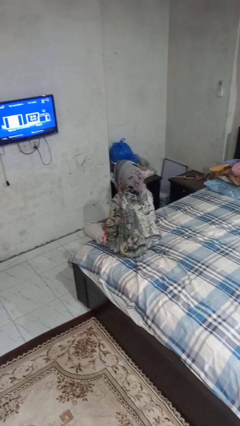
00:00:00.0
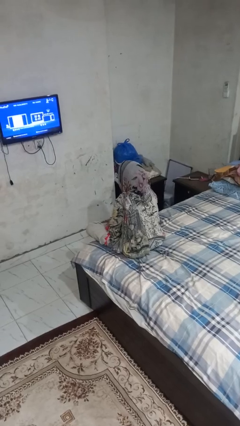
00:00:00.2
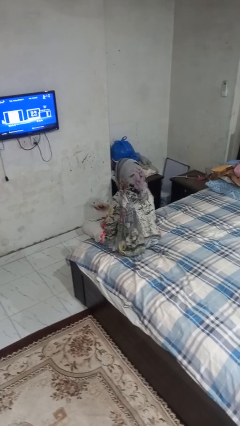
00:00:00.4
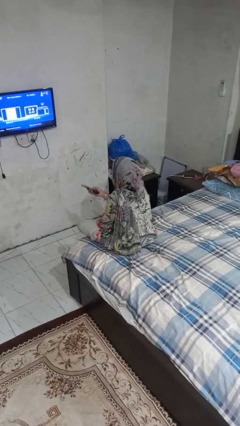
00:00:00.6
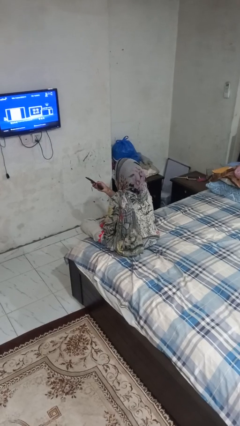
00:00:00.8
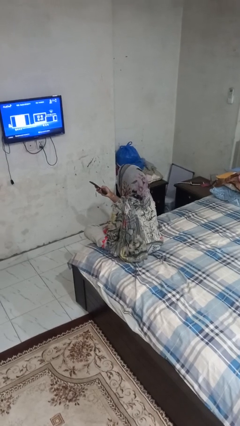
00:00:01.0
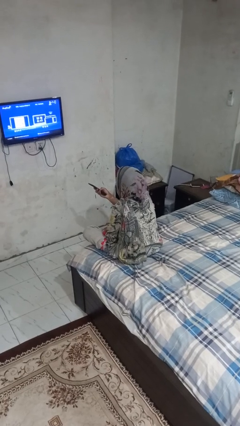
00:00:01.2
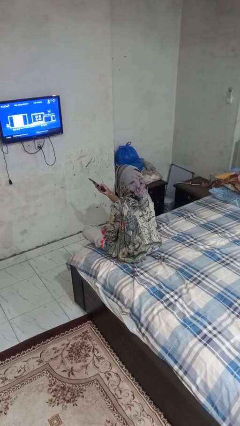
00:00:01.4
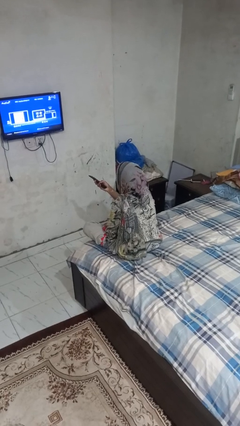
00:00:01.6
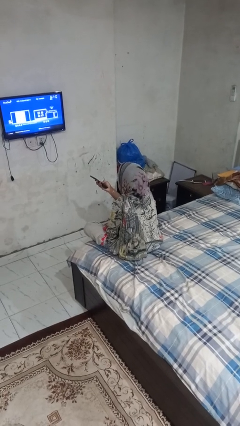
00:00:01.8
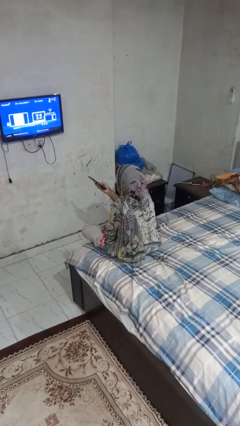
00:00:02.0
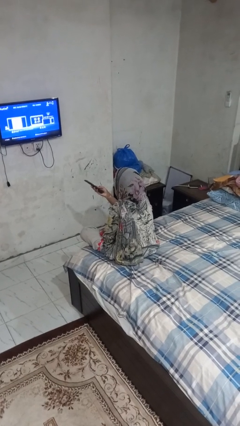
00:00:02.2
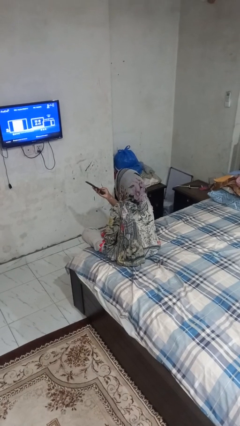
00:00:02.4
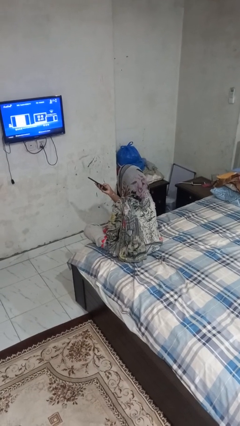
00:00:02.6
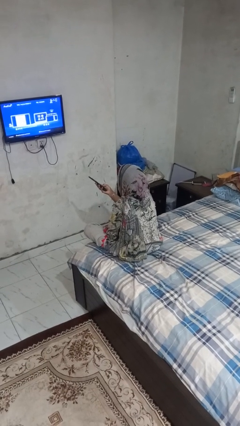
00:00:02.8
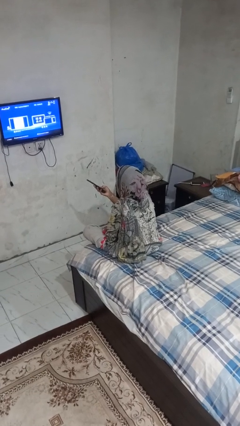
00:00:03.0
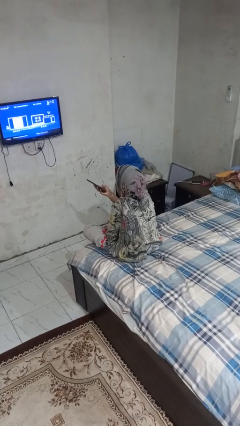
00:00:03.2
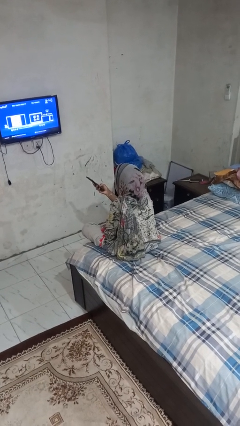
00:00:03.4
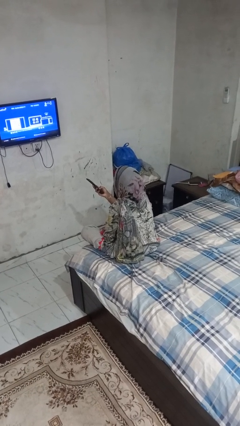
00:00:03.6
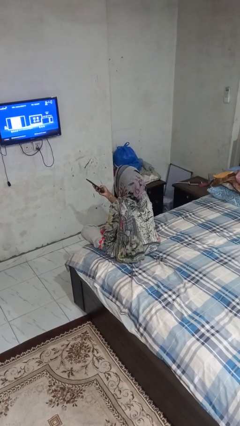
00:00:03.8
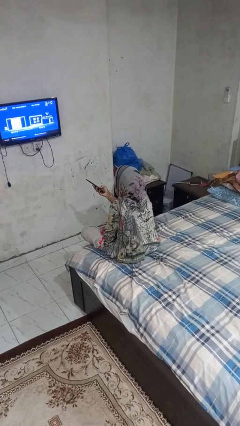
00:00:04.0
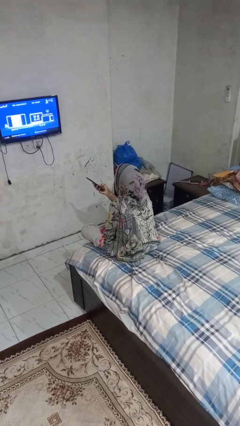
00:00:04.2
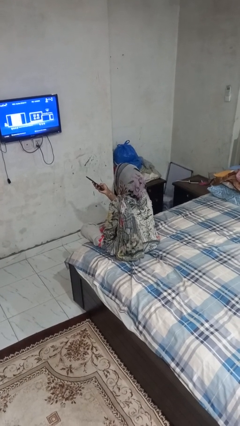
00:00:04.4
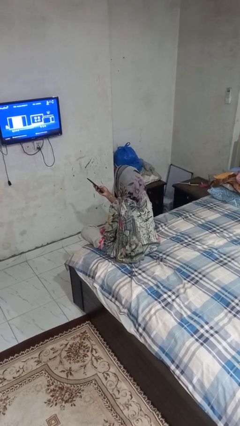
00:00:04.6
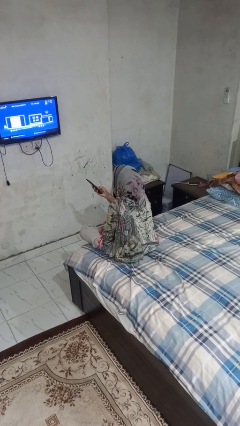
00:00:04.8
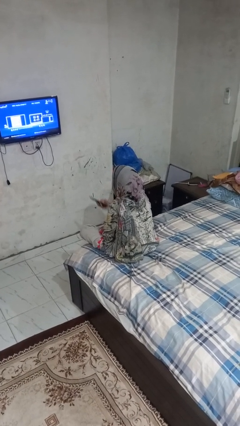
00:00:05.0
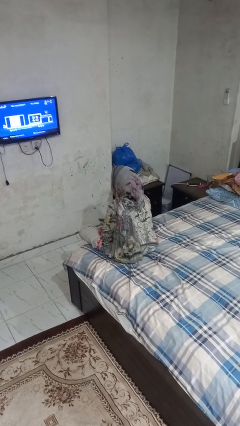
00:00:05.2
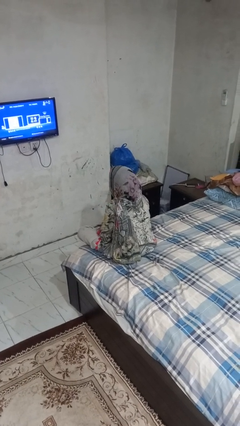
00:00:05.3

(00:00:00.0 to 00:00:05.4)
person uses television remote

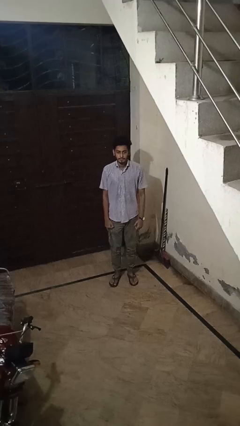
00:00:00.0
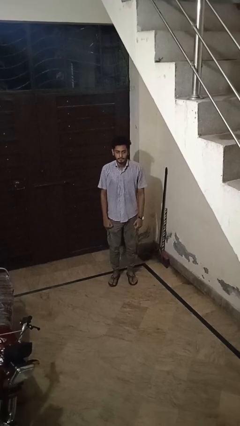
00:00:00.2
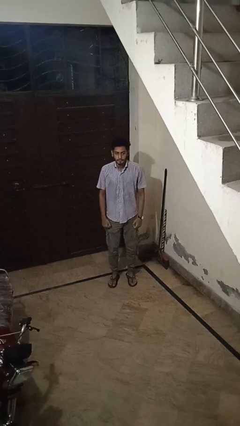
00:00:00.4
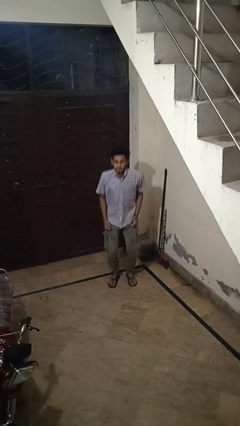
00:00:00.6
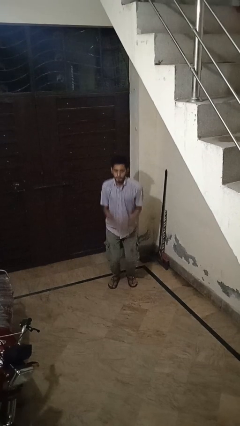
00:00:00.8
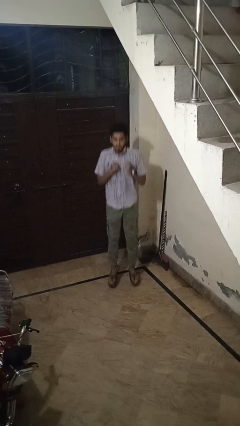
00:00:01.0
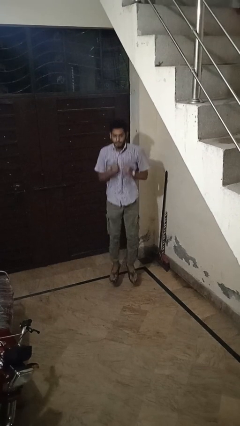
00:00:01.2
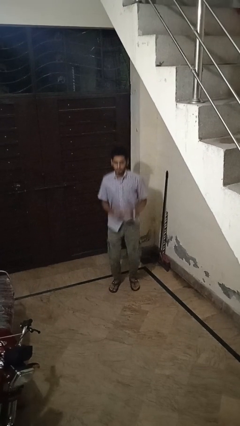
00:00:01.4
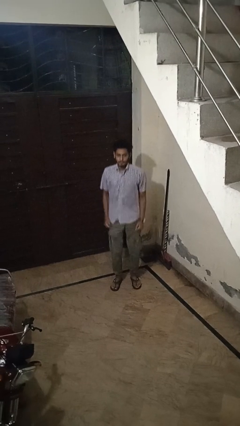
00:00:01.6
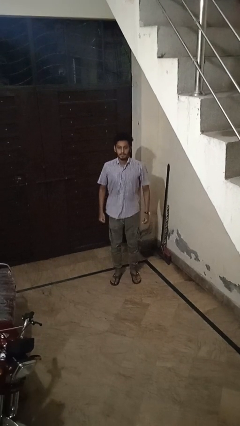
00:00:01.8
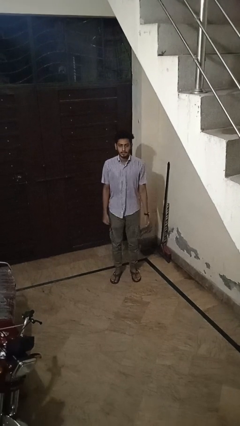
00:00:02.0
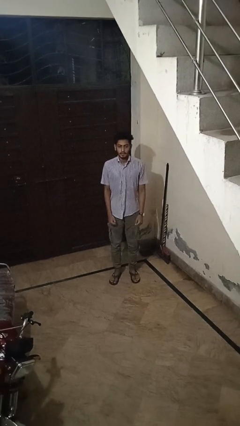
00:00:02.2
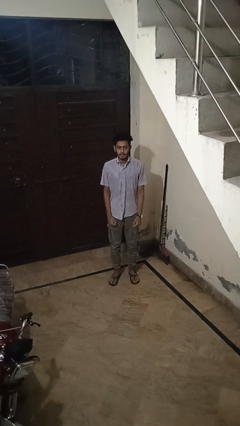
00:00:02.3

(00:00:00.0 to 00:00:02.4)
person jumps

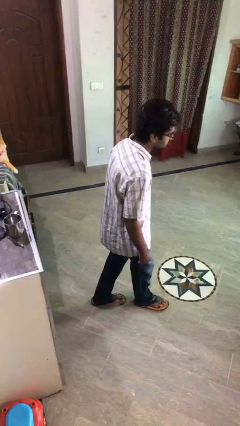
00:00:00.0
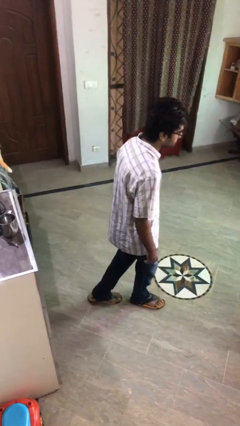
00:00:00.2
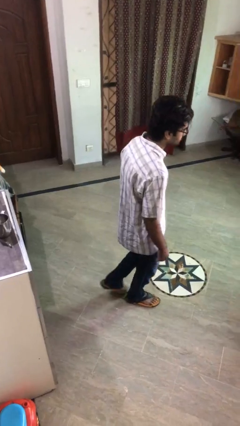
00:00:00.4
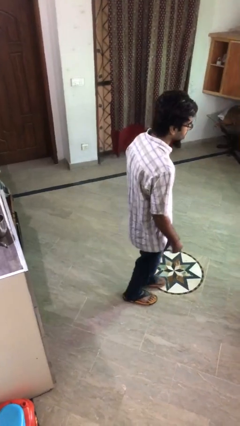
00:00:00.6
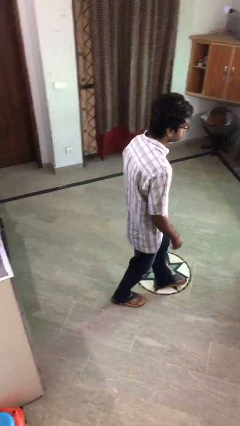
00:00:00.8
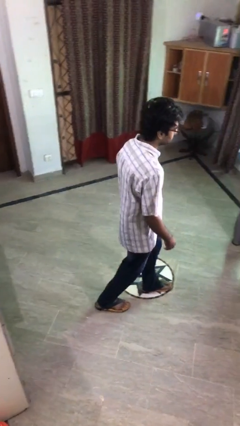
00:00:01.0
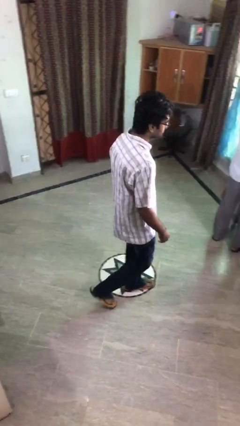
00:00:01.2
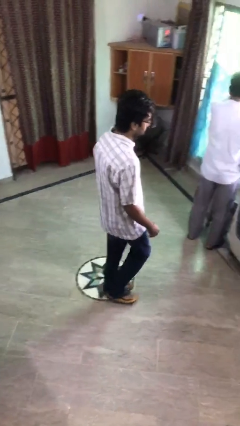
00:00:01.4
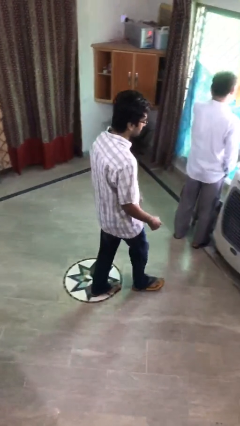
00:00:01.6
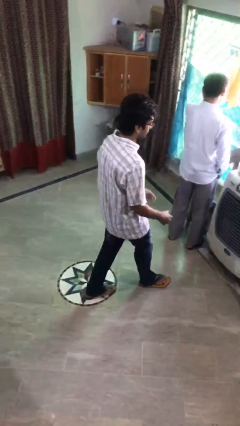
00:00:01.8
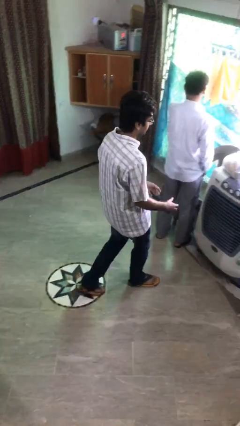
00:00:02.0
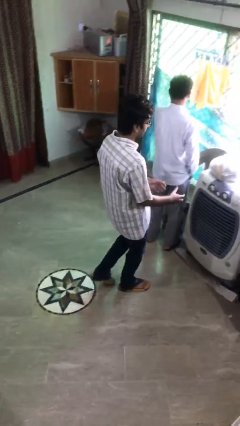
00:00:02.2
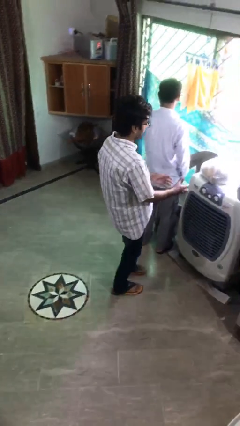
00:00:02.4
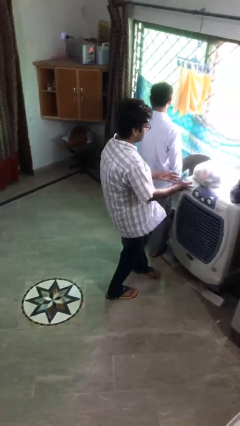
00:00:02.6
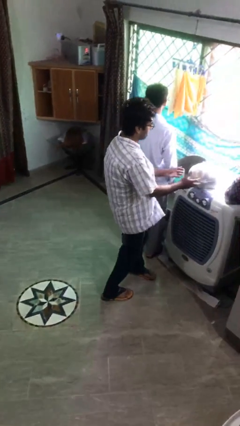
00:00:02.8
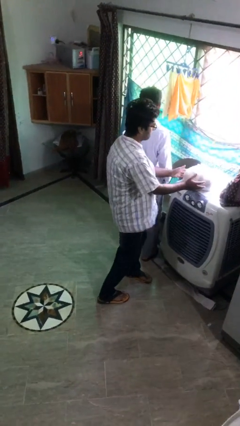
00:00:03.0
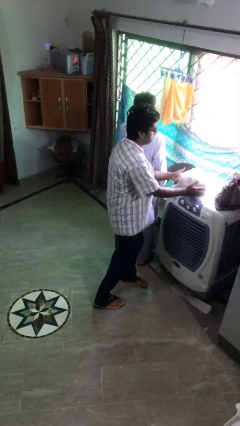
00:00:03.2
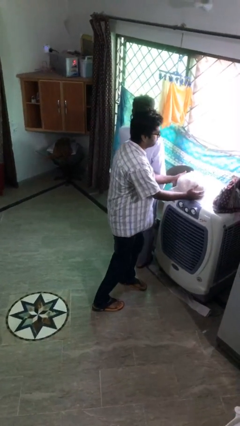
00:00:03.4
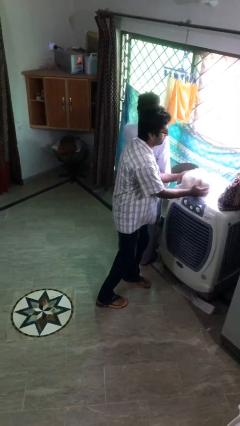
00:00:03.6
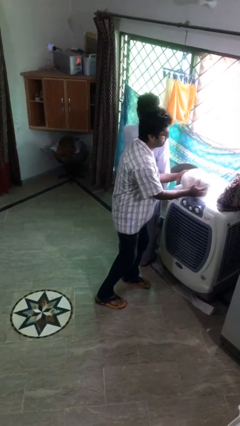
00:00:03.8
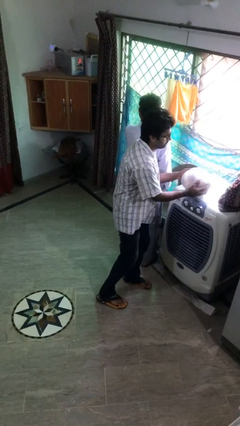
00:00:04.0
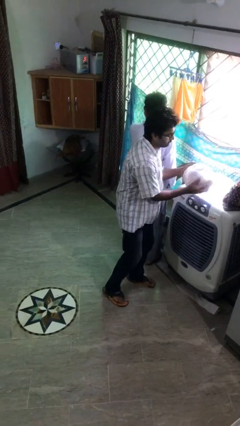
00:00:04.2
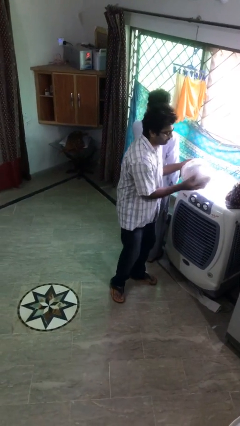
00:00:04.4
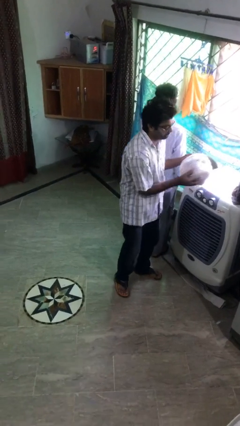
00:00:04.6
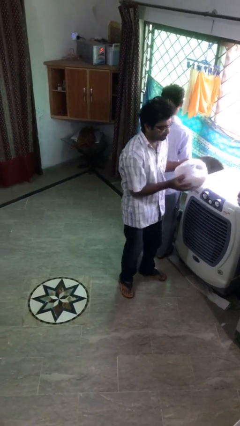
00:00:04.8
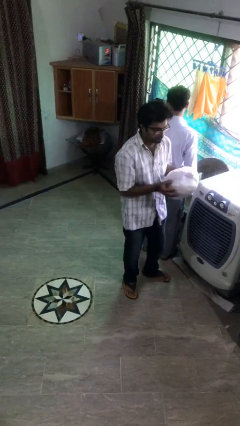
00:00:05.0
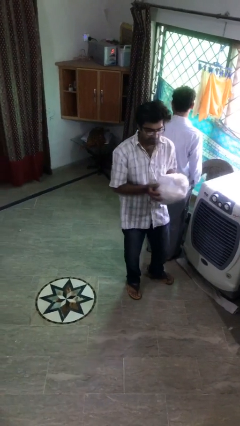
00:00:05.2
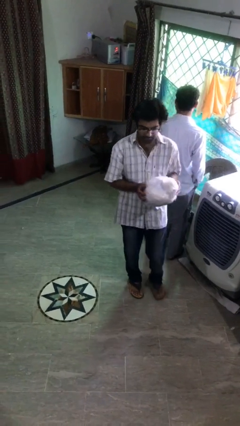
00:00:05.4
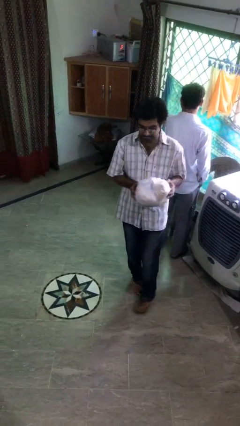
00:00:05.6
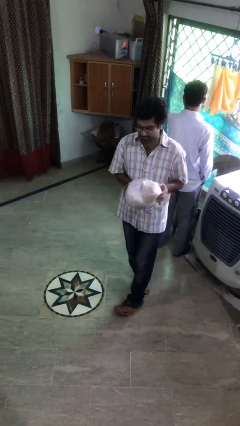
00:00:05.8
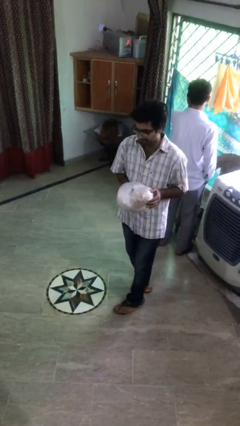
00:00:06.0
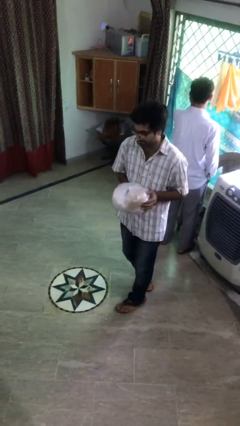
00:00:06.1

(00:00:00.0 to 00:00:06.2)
person steals object from person

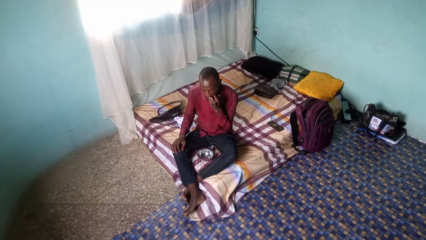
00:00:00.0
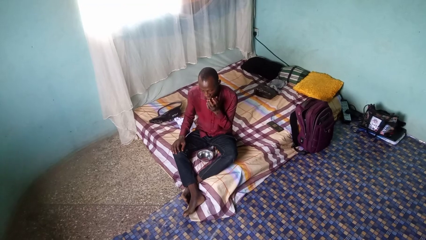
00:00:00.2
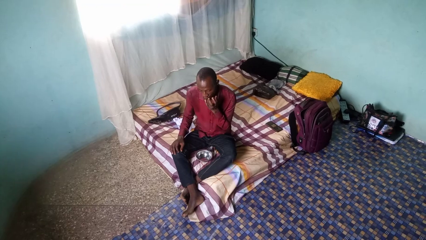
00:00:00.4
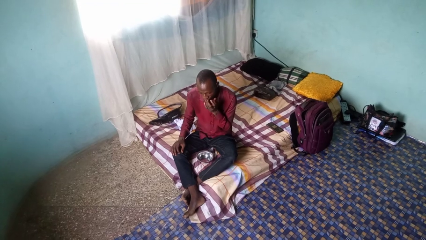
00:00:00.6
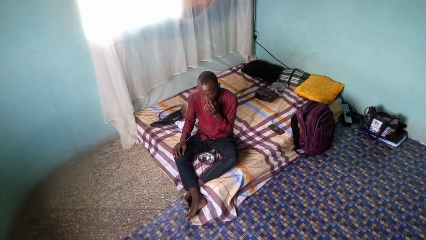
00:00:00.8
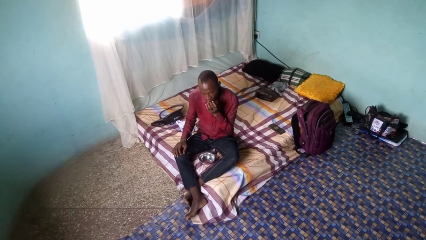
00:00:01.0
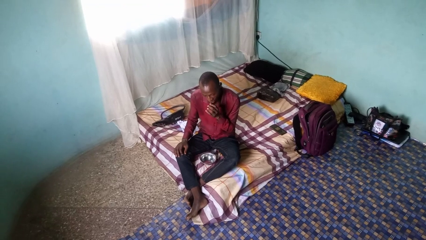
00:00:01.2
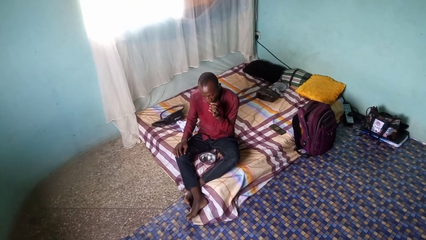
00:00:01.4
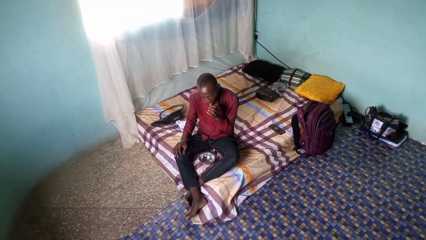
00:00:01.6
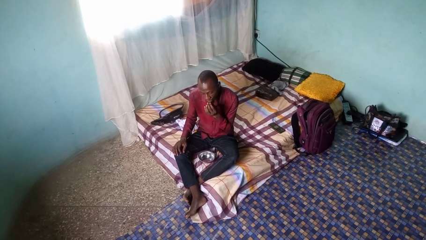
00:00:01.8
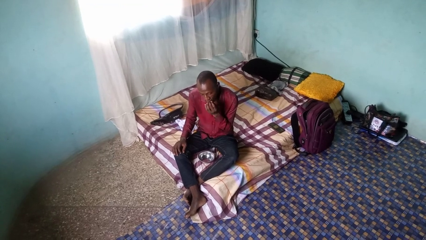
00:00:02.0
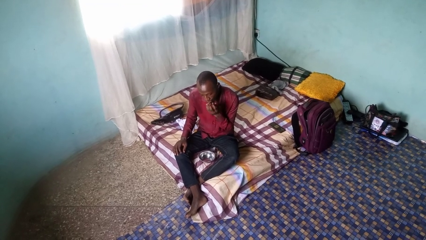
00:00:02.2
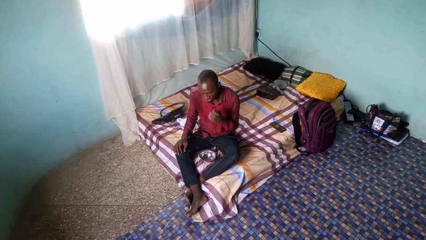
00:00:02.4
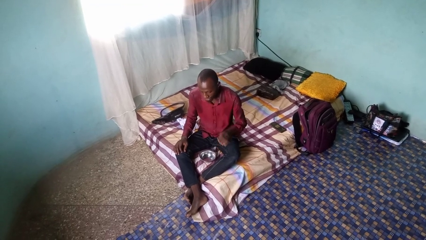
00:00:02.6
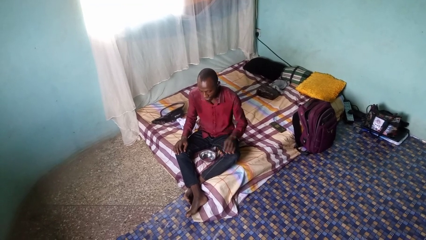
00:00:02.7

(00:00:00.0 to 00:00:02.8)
person licks fingers

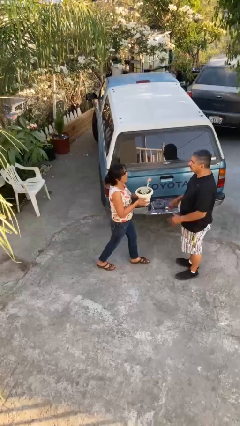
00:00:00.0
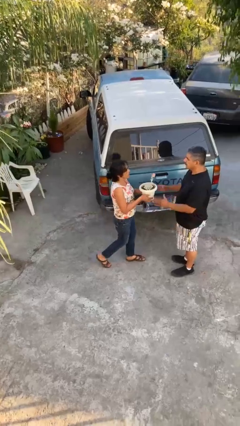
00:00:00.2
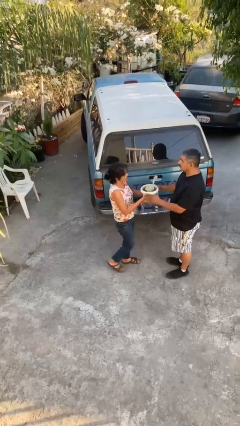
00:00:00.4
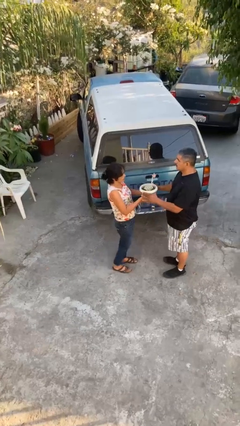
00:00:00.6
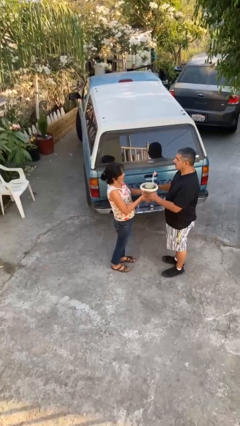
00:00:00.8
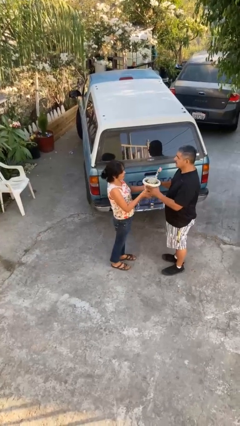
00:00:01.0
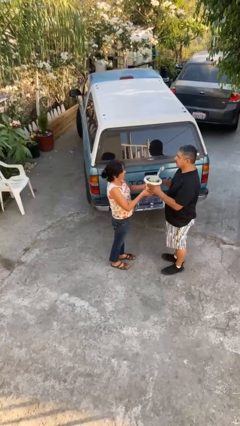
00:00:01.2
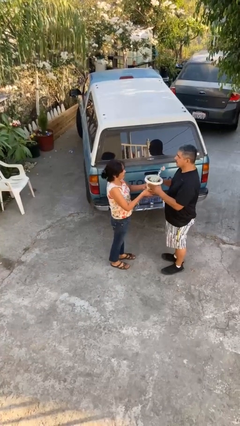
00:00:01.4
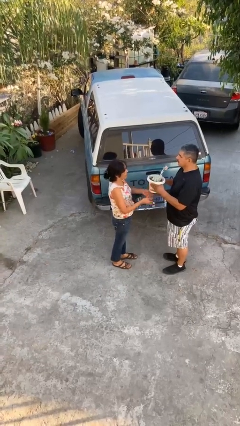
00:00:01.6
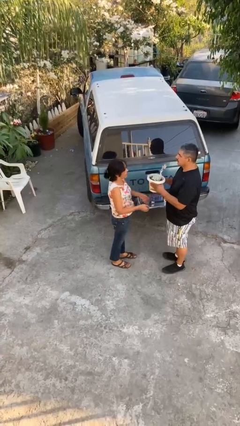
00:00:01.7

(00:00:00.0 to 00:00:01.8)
person transfers object to person
